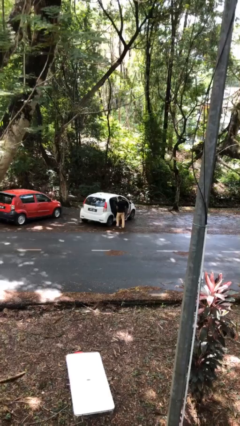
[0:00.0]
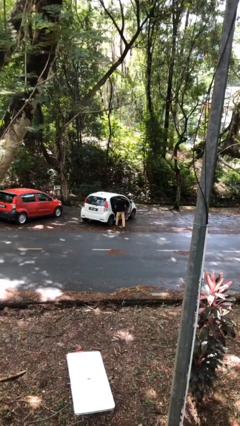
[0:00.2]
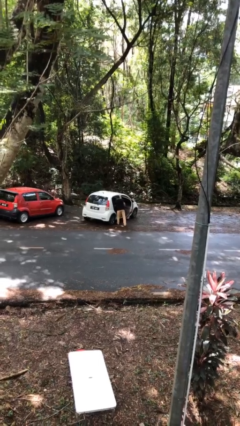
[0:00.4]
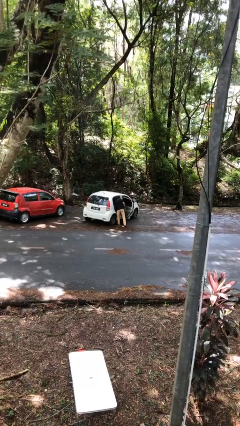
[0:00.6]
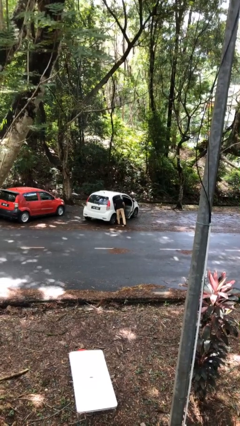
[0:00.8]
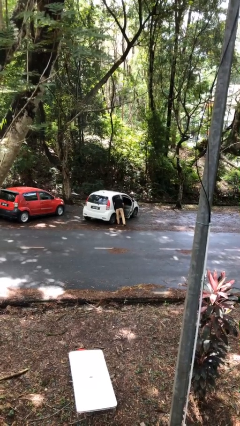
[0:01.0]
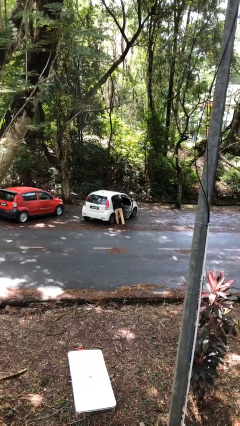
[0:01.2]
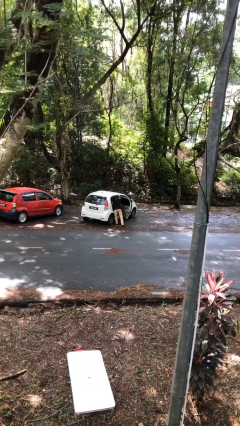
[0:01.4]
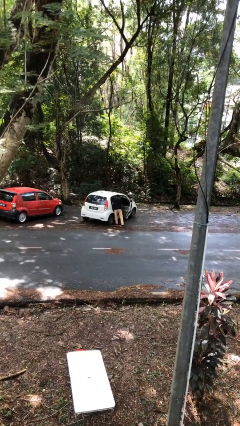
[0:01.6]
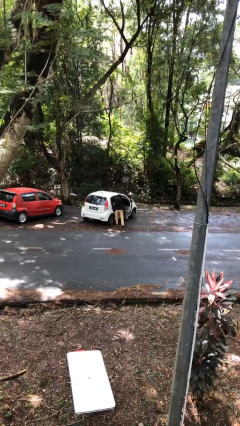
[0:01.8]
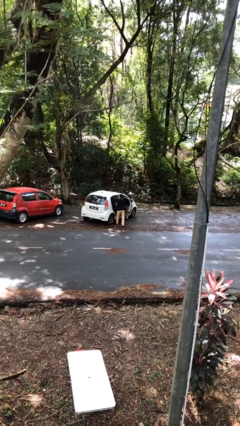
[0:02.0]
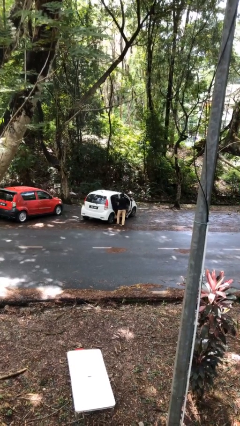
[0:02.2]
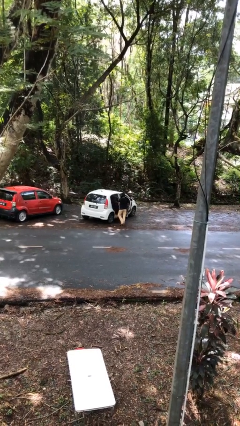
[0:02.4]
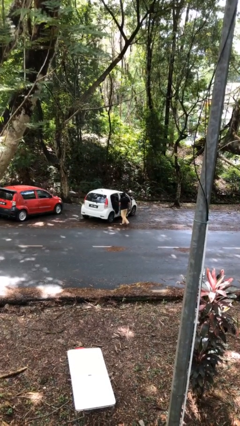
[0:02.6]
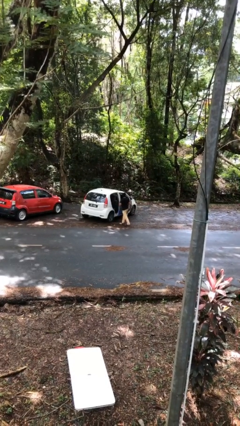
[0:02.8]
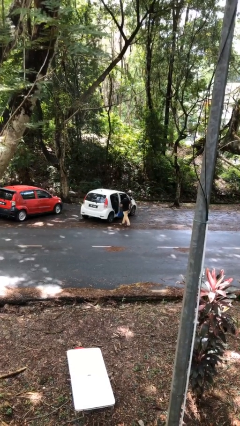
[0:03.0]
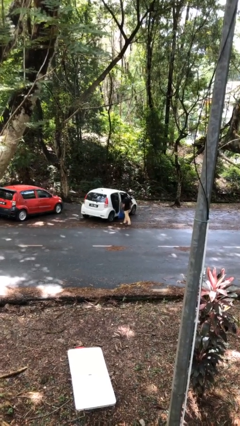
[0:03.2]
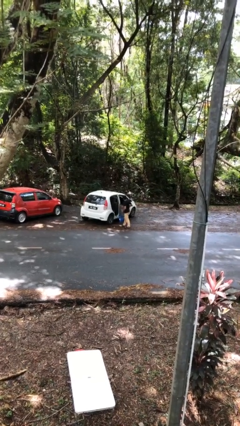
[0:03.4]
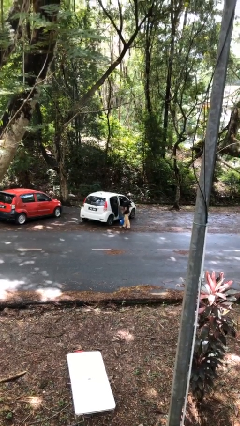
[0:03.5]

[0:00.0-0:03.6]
person unloads car

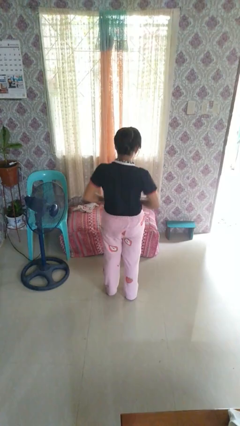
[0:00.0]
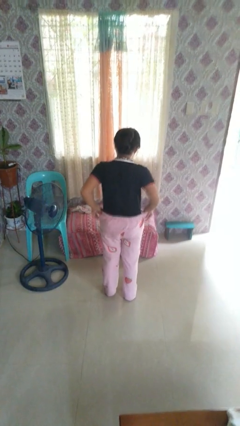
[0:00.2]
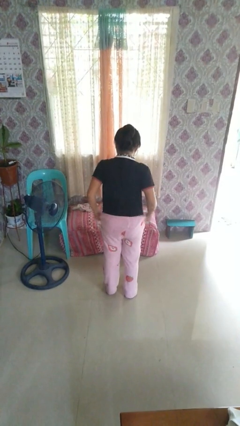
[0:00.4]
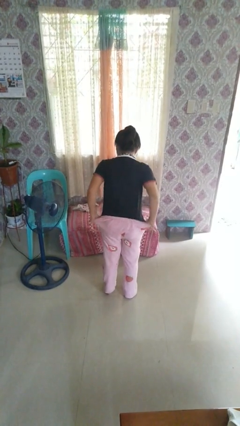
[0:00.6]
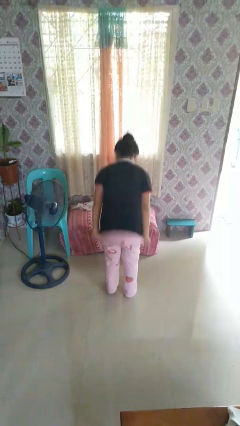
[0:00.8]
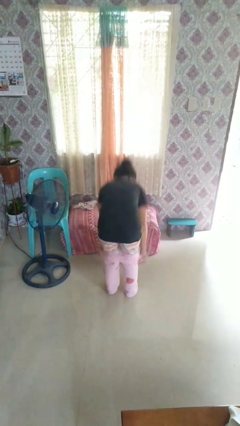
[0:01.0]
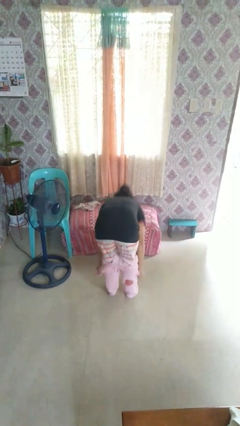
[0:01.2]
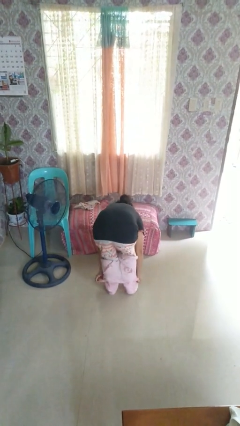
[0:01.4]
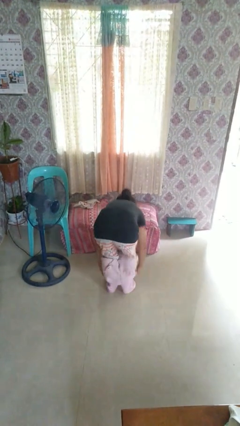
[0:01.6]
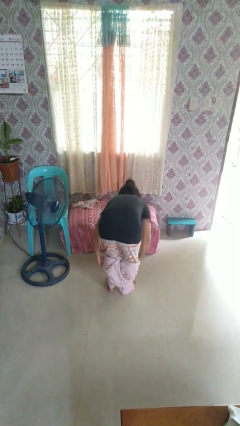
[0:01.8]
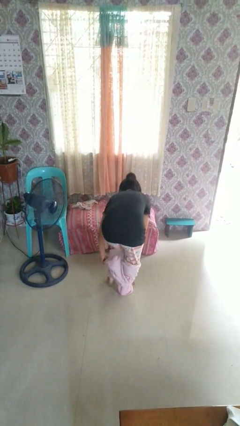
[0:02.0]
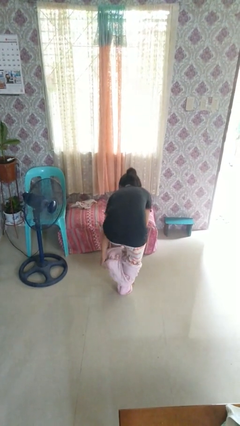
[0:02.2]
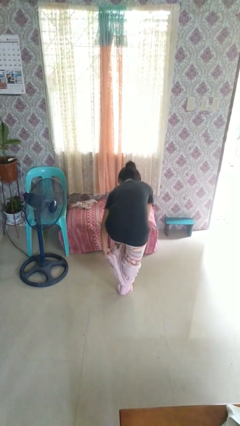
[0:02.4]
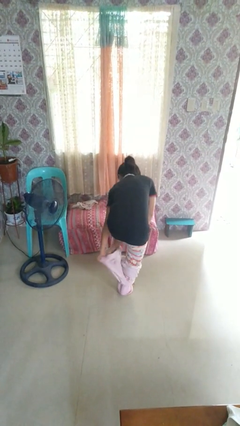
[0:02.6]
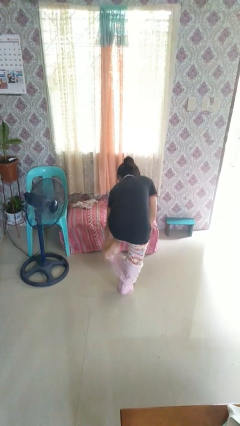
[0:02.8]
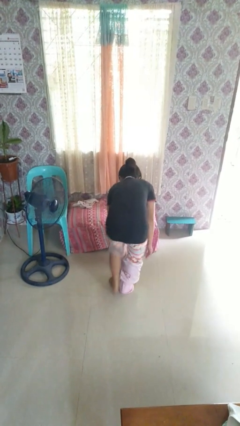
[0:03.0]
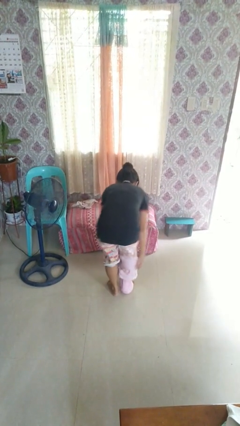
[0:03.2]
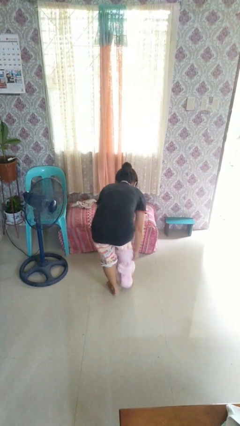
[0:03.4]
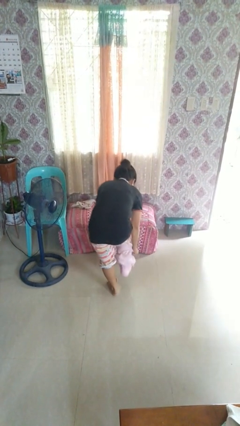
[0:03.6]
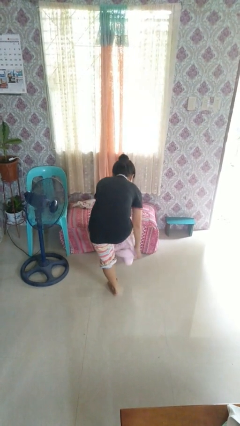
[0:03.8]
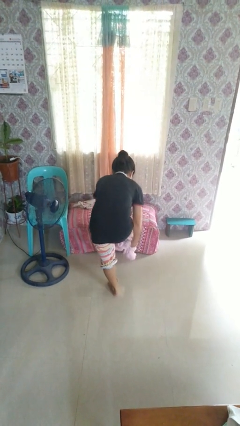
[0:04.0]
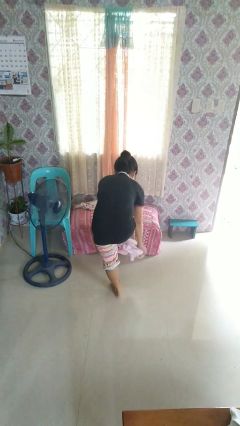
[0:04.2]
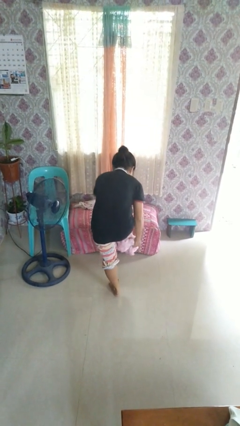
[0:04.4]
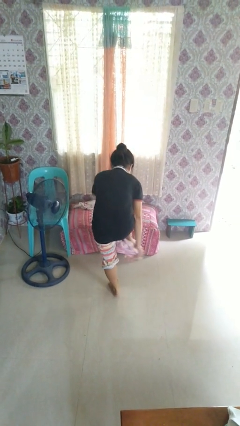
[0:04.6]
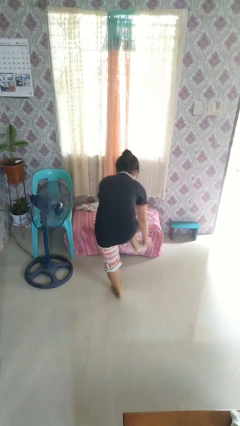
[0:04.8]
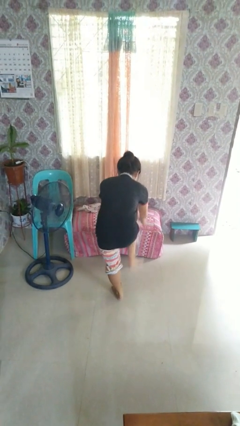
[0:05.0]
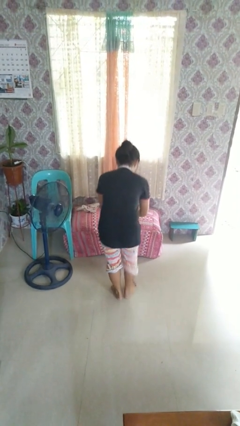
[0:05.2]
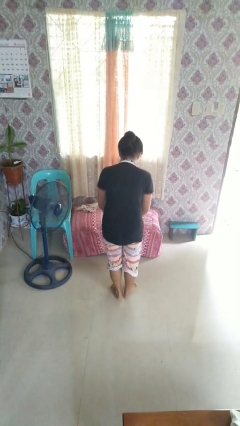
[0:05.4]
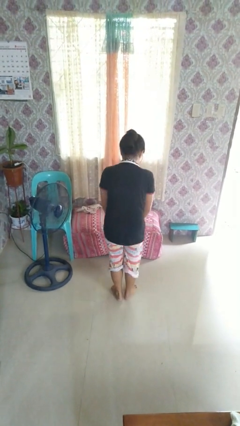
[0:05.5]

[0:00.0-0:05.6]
person takes off pants

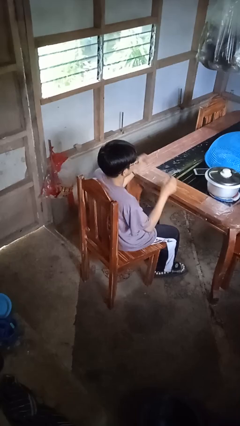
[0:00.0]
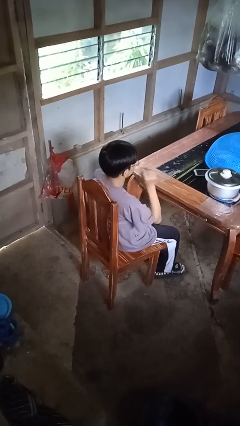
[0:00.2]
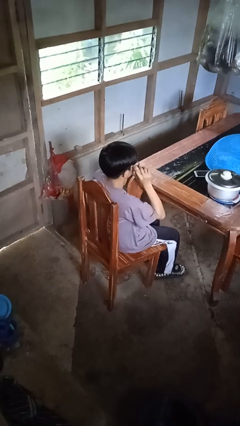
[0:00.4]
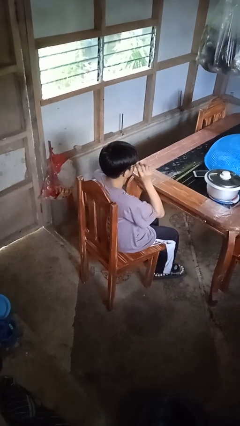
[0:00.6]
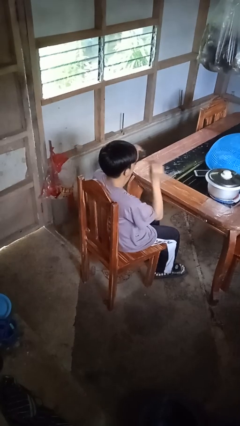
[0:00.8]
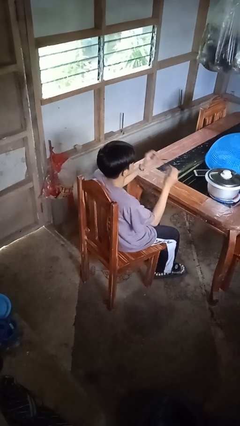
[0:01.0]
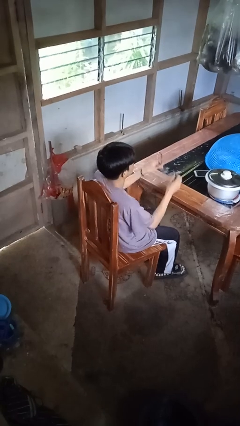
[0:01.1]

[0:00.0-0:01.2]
person takes off glasses

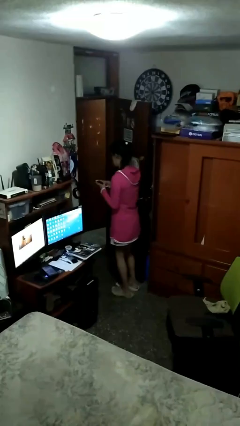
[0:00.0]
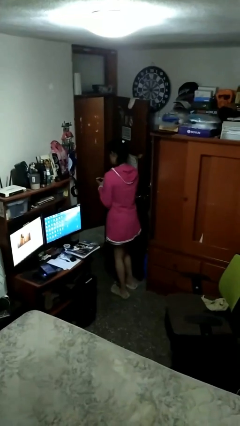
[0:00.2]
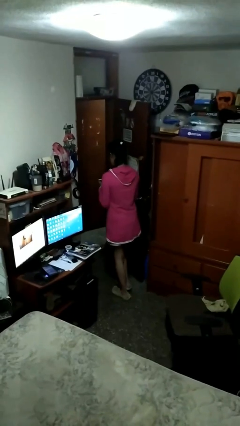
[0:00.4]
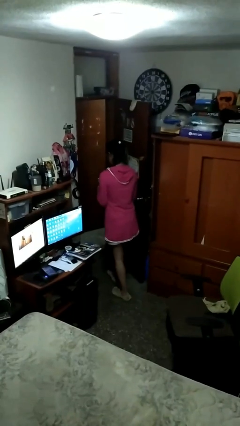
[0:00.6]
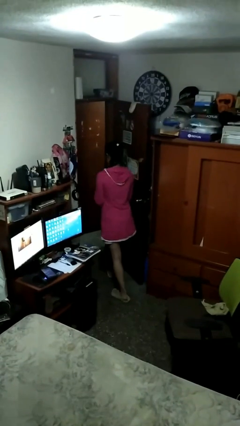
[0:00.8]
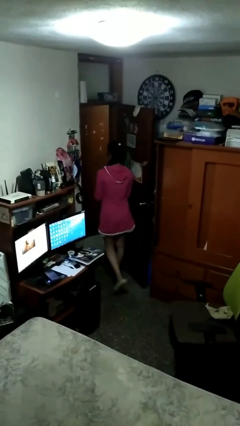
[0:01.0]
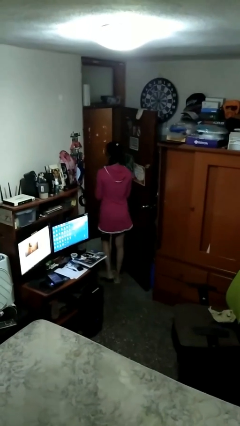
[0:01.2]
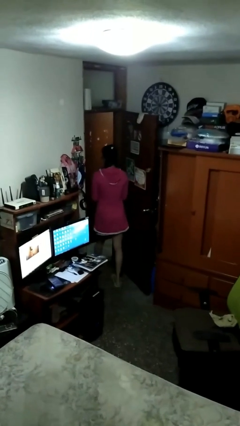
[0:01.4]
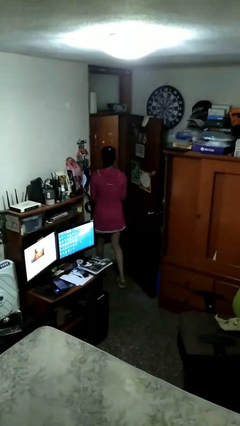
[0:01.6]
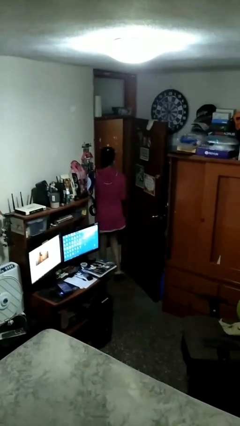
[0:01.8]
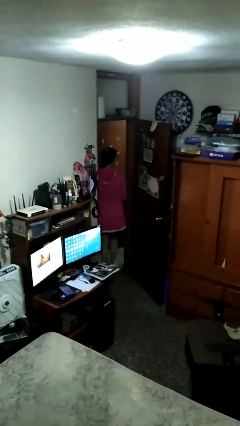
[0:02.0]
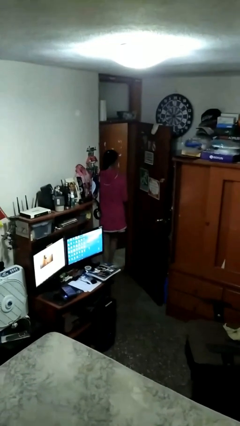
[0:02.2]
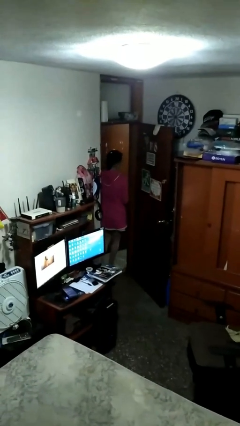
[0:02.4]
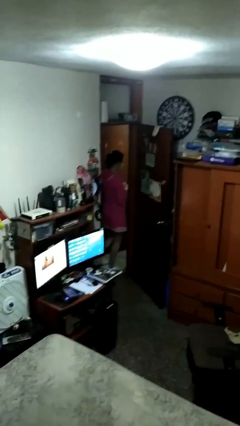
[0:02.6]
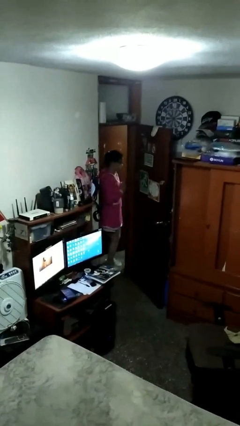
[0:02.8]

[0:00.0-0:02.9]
person exits scene through structure

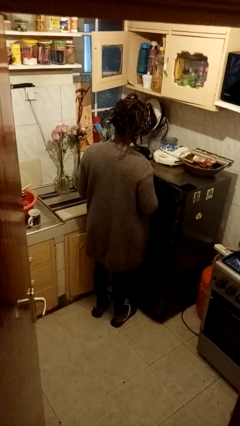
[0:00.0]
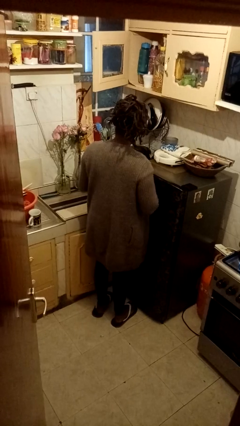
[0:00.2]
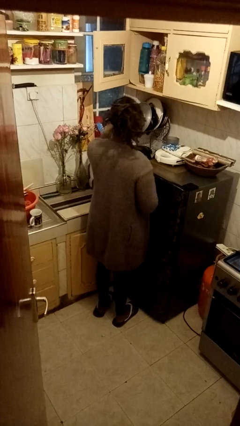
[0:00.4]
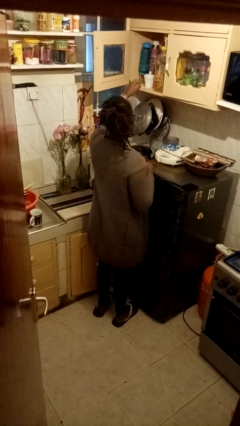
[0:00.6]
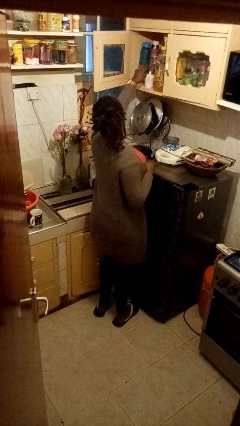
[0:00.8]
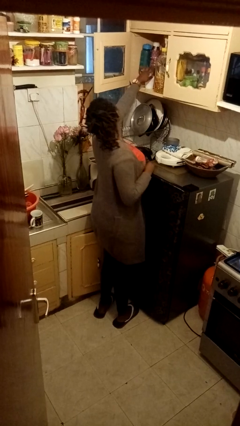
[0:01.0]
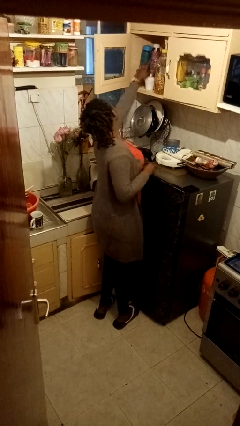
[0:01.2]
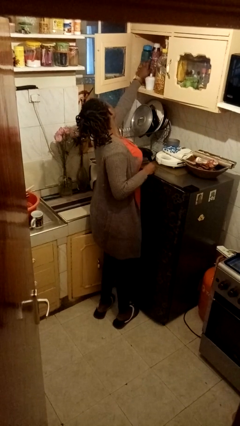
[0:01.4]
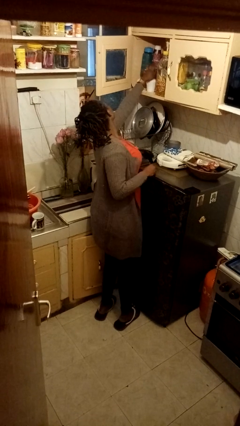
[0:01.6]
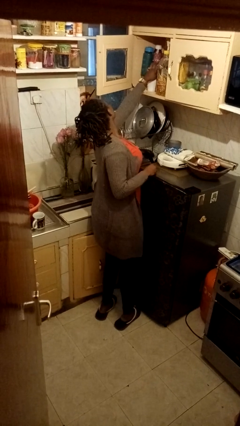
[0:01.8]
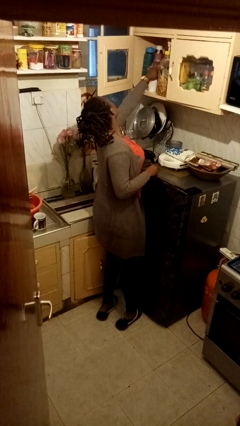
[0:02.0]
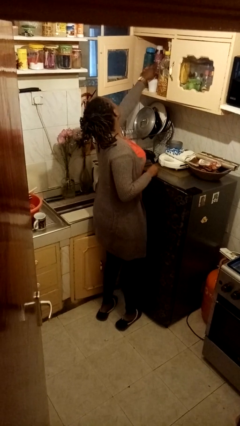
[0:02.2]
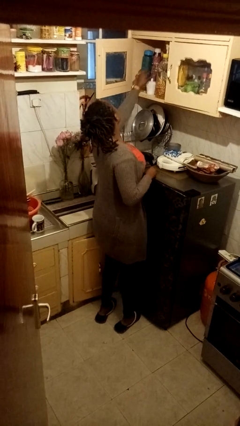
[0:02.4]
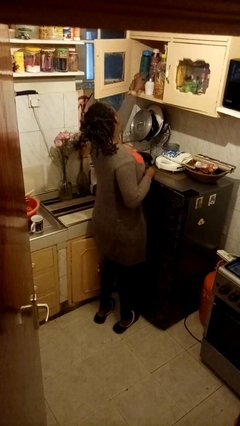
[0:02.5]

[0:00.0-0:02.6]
person searches in cabinet

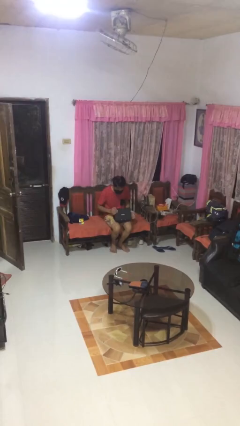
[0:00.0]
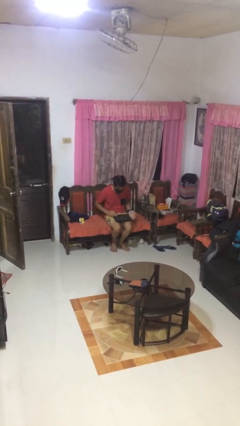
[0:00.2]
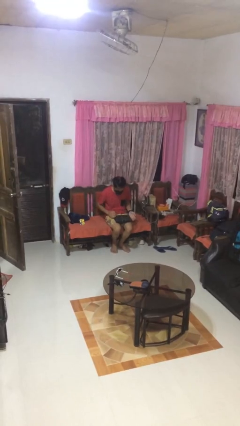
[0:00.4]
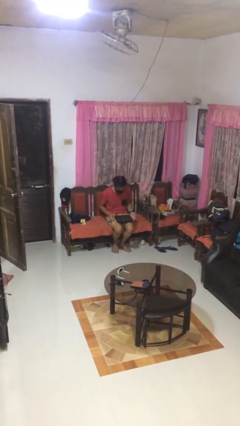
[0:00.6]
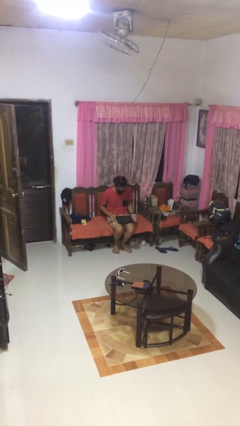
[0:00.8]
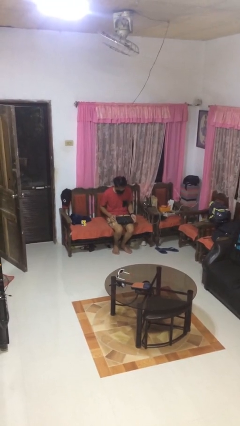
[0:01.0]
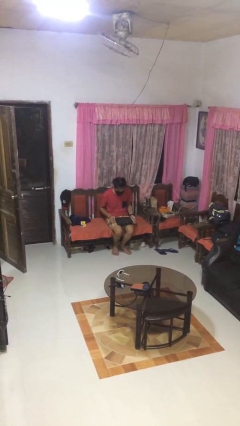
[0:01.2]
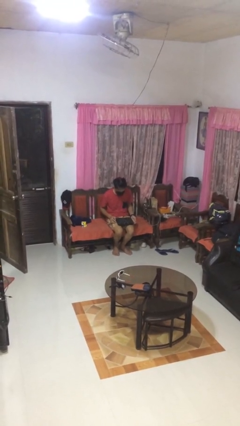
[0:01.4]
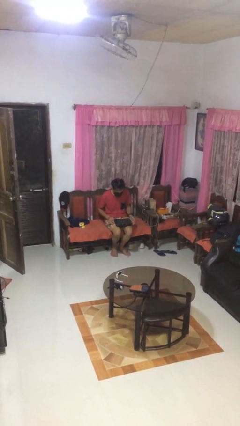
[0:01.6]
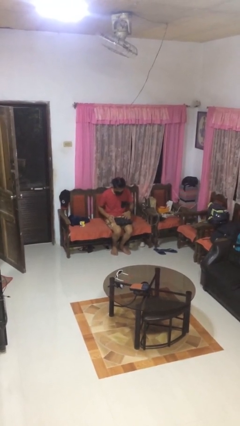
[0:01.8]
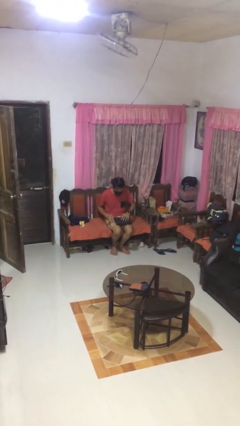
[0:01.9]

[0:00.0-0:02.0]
person closes laptop
